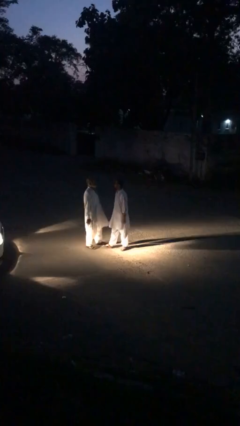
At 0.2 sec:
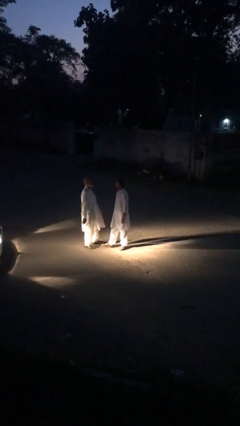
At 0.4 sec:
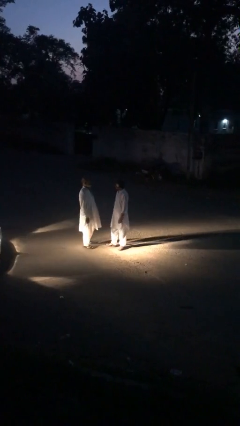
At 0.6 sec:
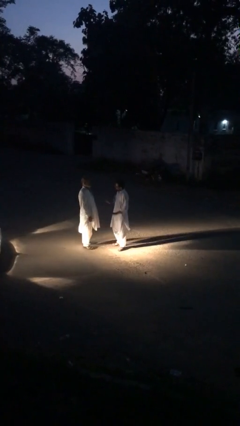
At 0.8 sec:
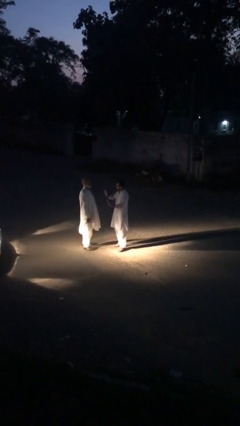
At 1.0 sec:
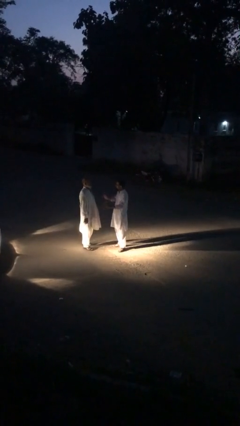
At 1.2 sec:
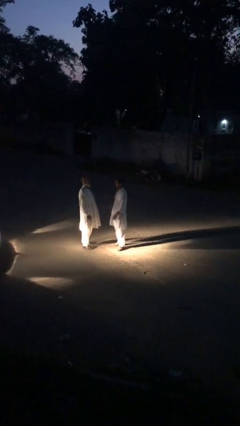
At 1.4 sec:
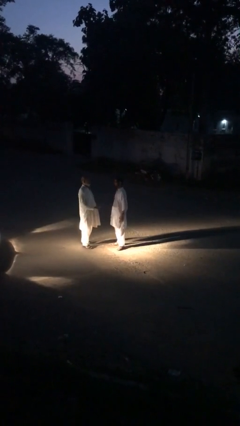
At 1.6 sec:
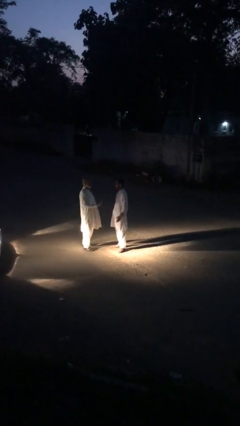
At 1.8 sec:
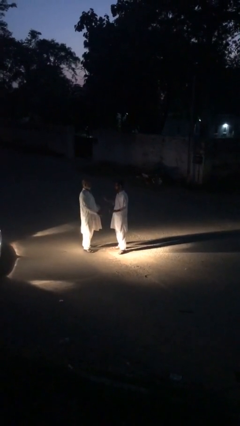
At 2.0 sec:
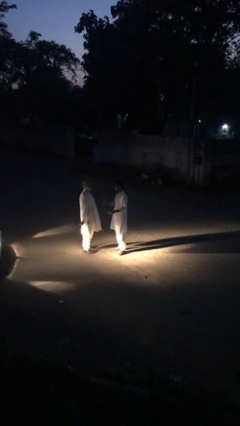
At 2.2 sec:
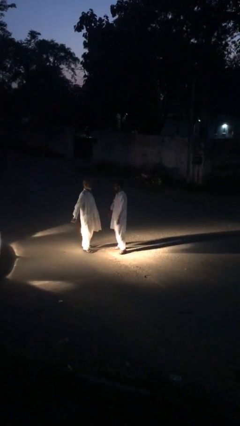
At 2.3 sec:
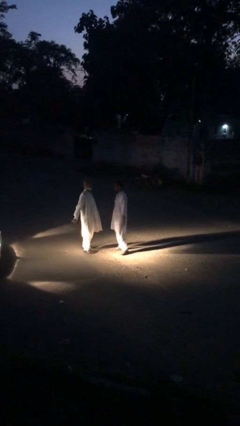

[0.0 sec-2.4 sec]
person talks to person

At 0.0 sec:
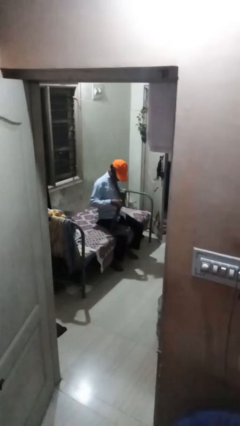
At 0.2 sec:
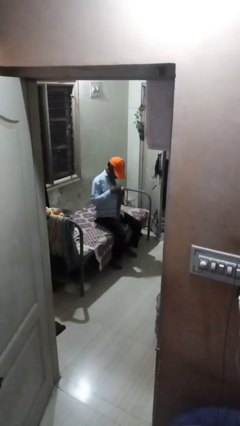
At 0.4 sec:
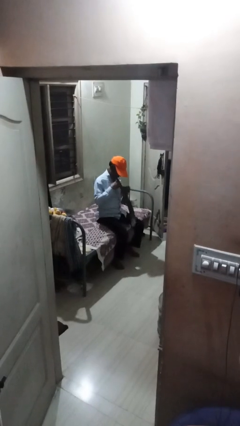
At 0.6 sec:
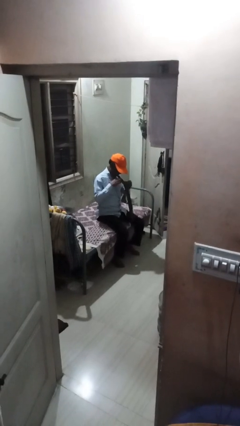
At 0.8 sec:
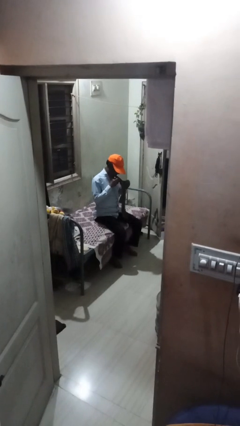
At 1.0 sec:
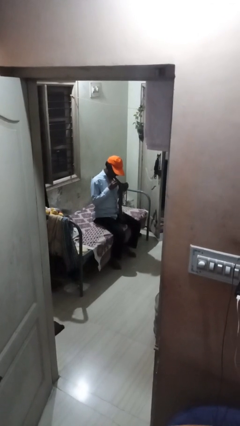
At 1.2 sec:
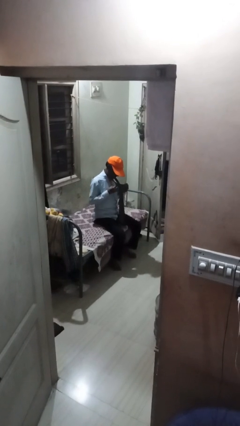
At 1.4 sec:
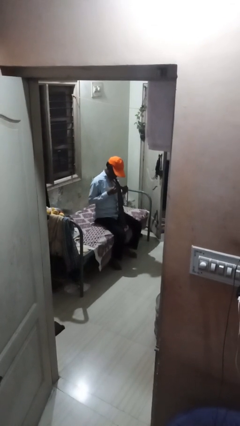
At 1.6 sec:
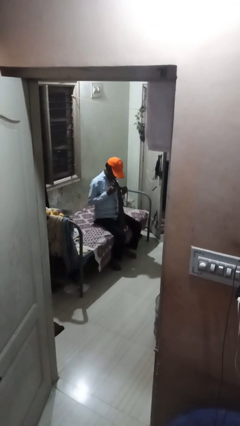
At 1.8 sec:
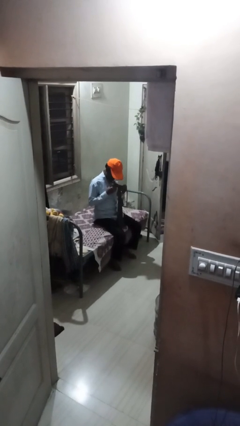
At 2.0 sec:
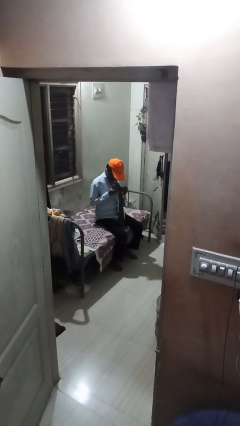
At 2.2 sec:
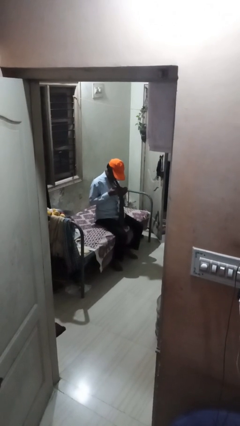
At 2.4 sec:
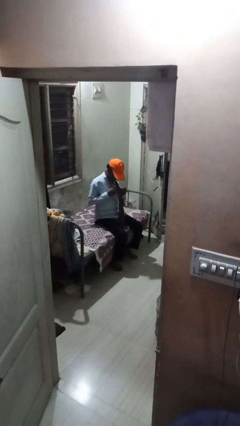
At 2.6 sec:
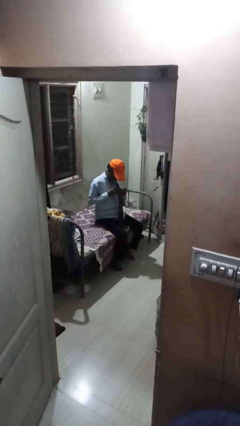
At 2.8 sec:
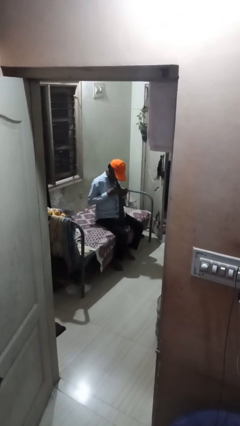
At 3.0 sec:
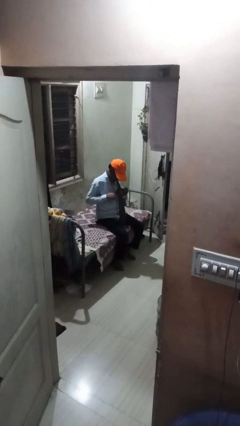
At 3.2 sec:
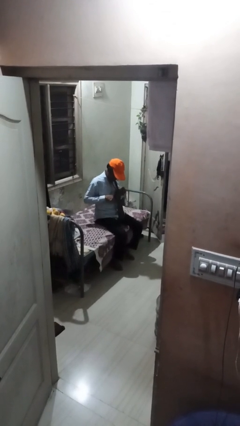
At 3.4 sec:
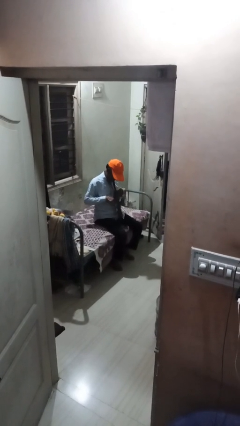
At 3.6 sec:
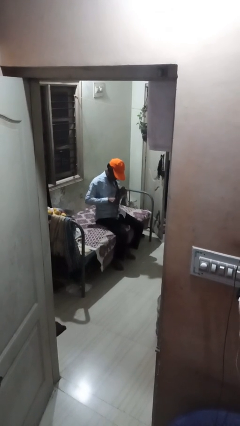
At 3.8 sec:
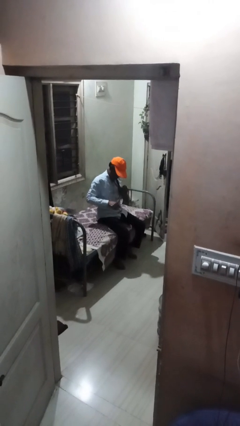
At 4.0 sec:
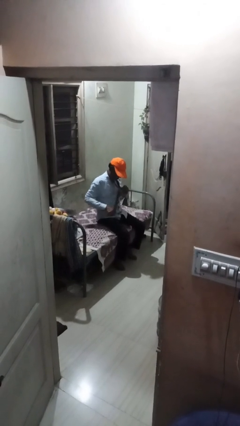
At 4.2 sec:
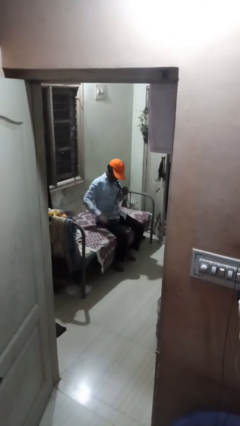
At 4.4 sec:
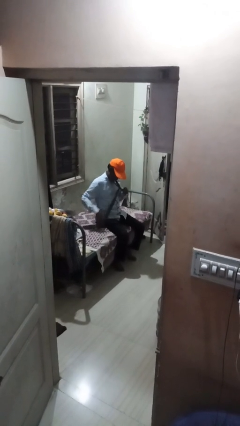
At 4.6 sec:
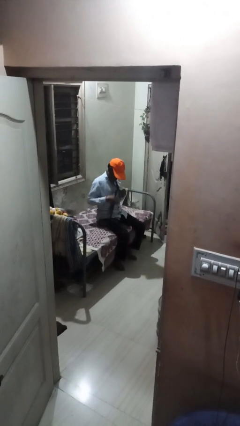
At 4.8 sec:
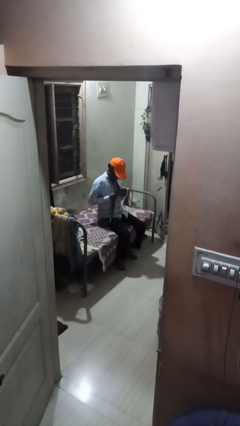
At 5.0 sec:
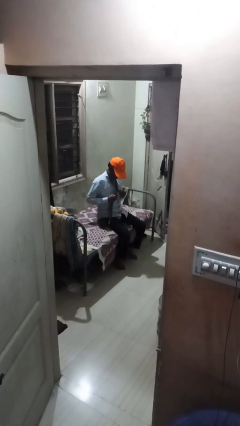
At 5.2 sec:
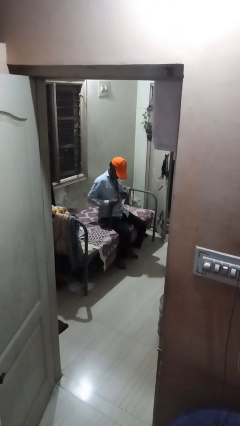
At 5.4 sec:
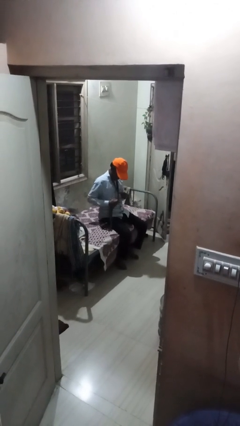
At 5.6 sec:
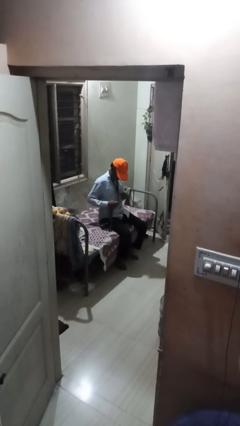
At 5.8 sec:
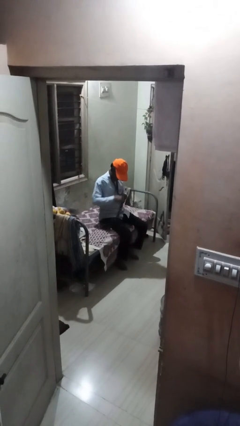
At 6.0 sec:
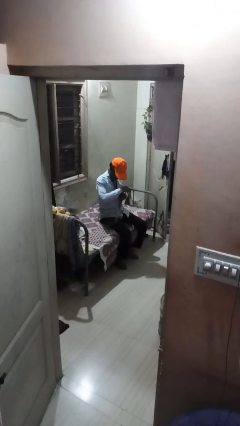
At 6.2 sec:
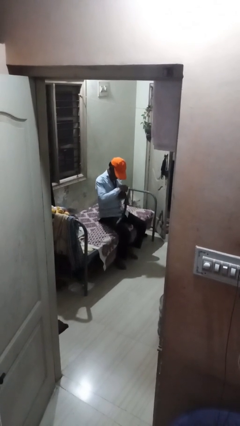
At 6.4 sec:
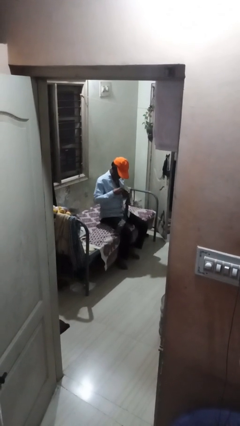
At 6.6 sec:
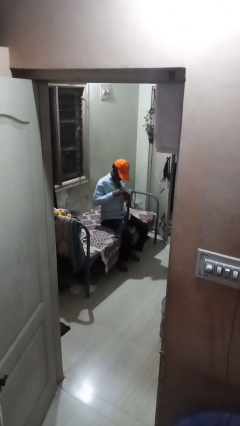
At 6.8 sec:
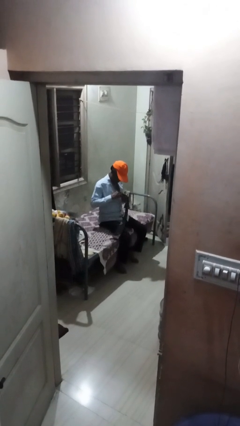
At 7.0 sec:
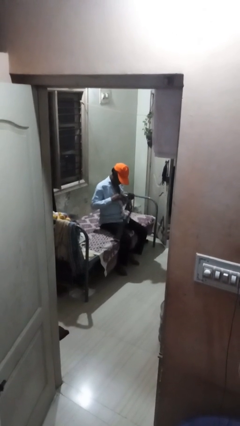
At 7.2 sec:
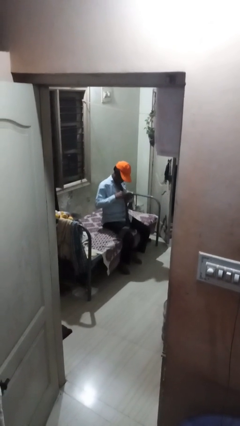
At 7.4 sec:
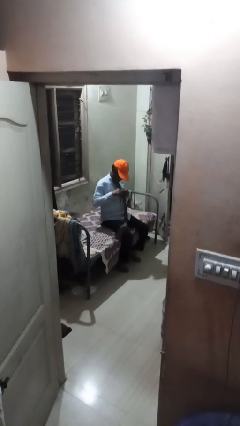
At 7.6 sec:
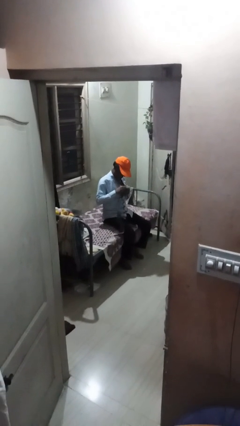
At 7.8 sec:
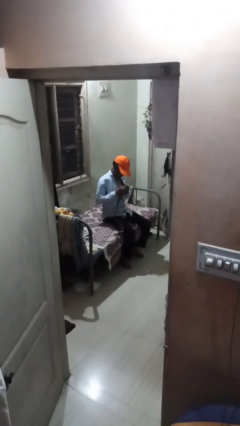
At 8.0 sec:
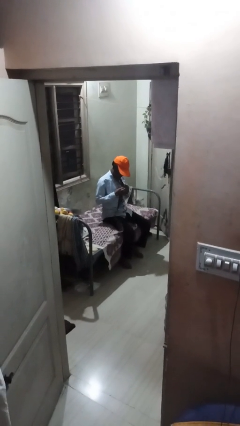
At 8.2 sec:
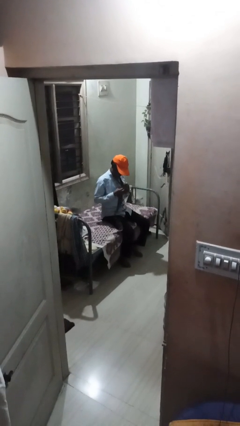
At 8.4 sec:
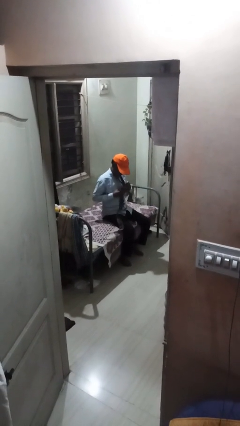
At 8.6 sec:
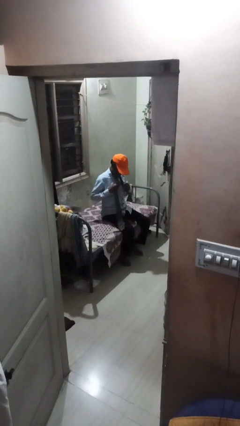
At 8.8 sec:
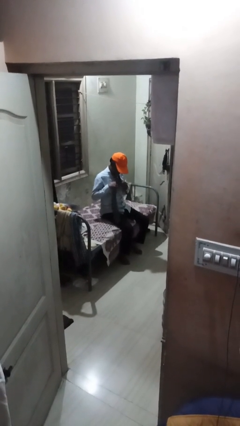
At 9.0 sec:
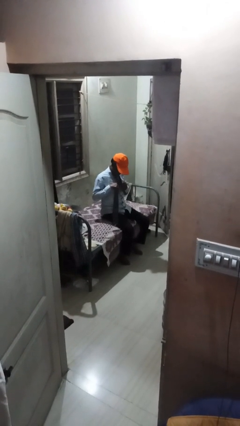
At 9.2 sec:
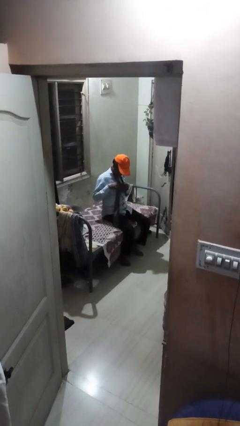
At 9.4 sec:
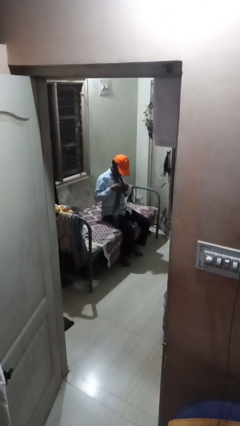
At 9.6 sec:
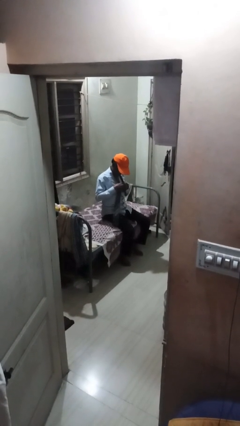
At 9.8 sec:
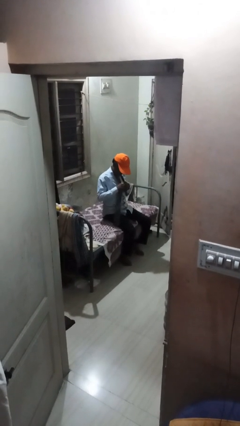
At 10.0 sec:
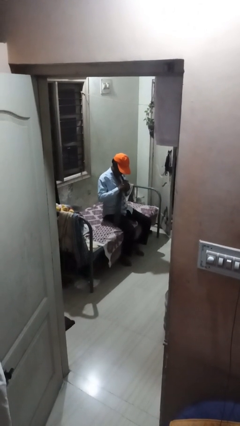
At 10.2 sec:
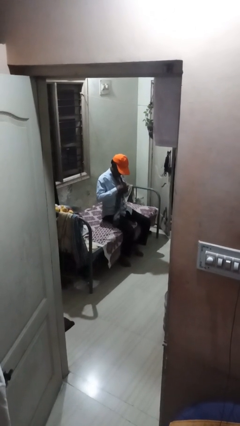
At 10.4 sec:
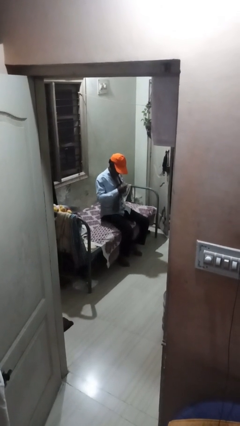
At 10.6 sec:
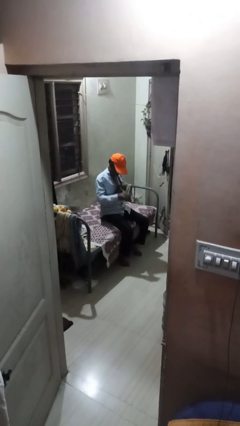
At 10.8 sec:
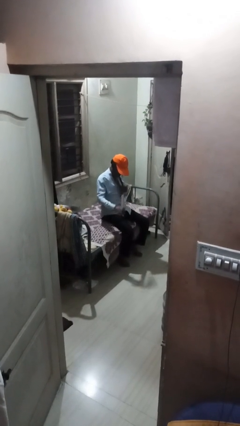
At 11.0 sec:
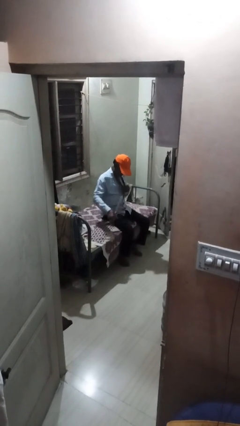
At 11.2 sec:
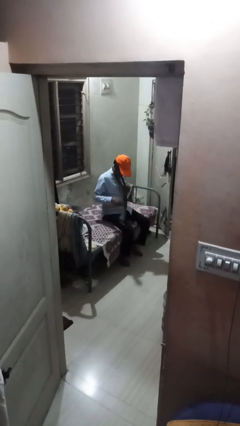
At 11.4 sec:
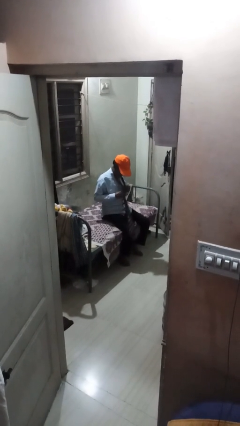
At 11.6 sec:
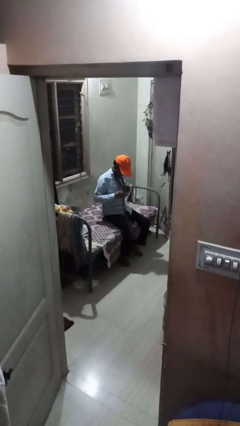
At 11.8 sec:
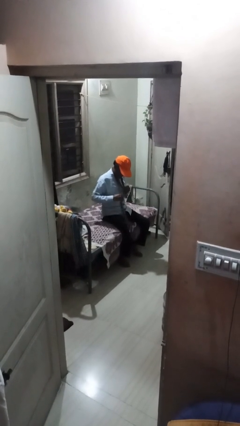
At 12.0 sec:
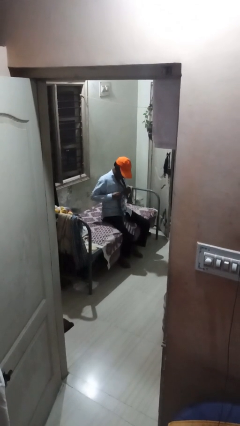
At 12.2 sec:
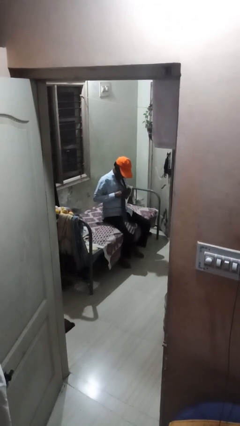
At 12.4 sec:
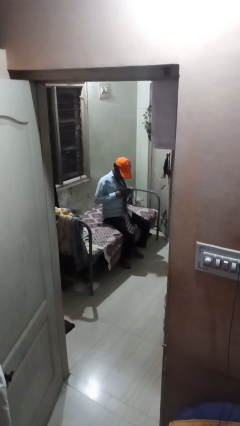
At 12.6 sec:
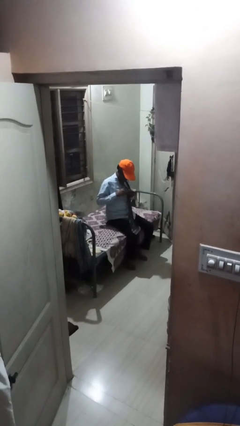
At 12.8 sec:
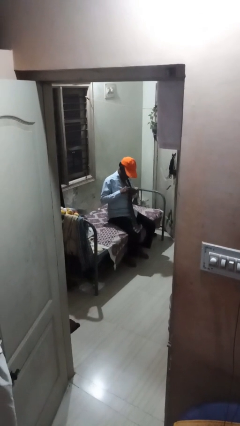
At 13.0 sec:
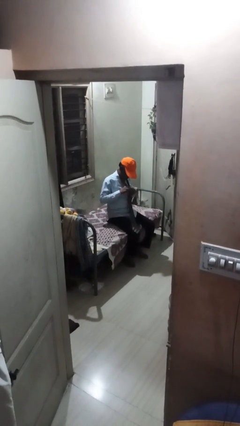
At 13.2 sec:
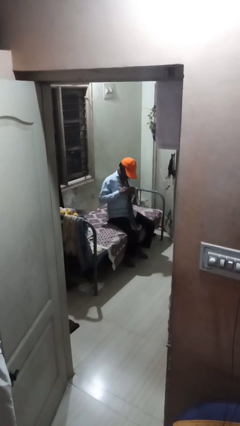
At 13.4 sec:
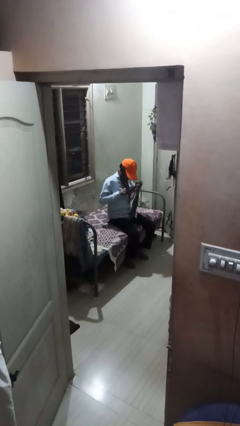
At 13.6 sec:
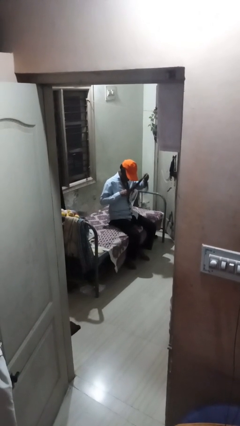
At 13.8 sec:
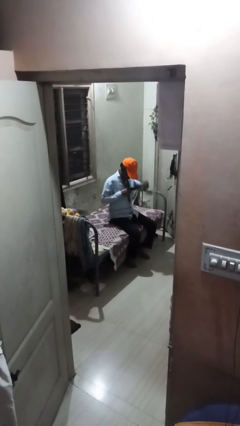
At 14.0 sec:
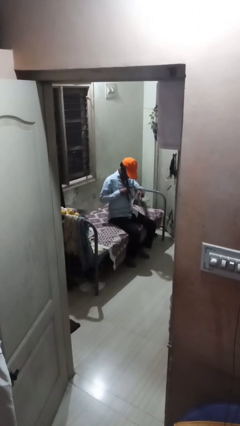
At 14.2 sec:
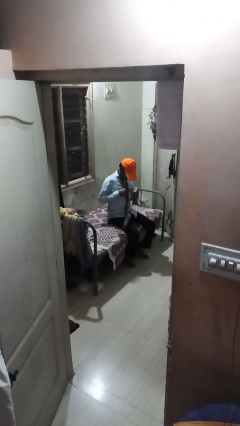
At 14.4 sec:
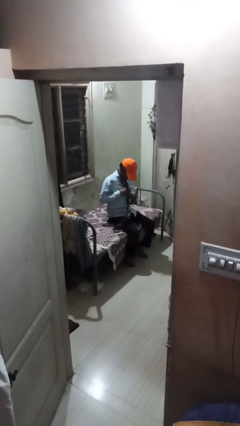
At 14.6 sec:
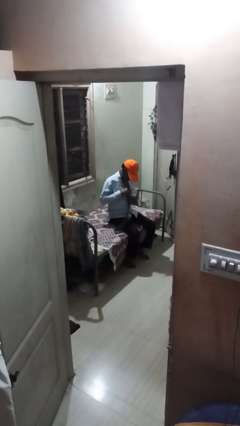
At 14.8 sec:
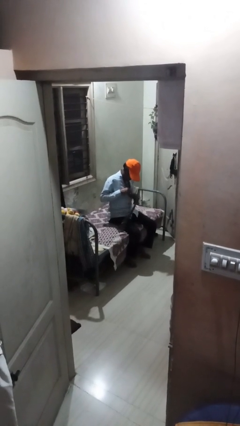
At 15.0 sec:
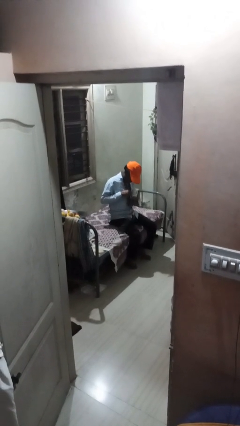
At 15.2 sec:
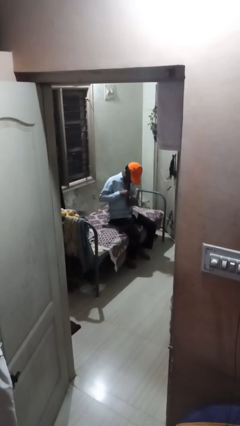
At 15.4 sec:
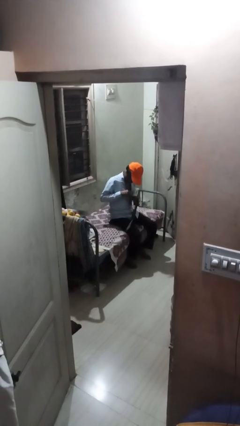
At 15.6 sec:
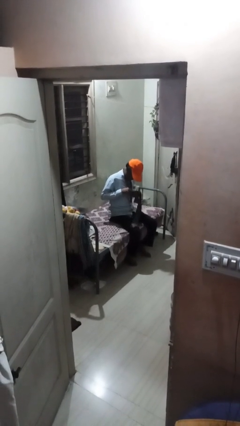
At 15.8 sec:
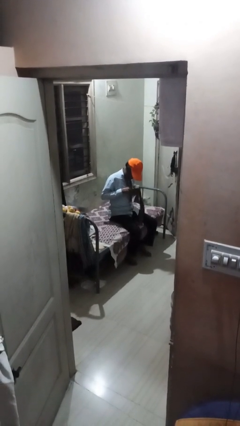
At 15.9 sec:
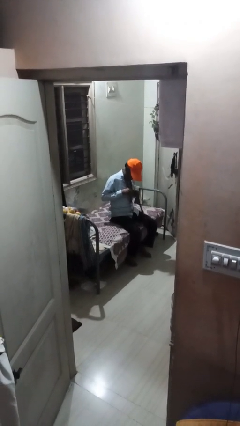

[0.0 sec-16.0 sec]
person puts on necktie
